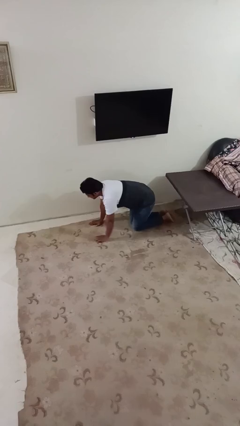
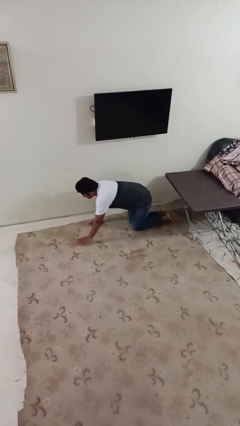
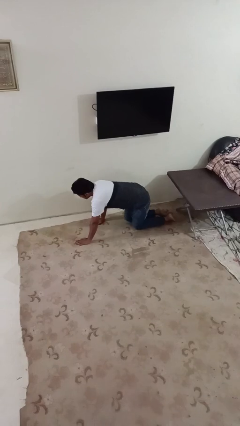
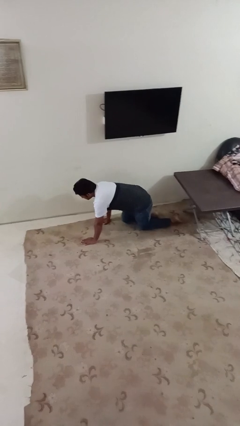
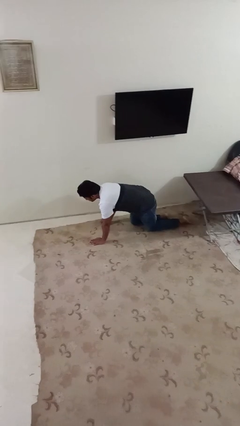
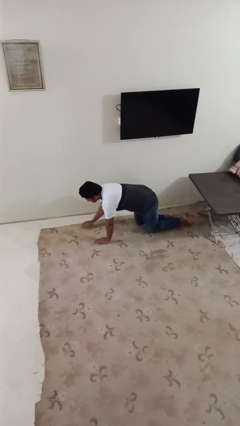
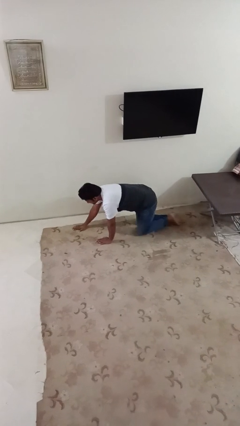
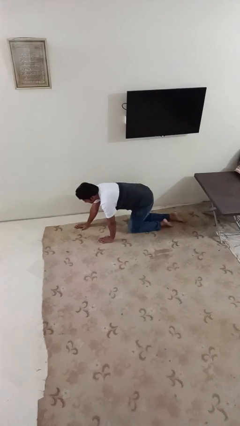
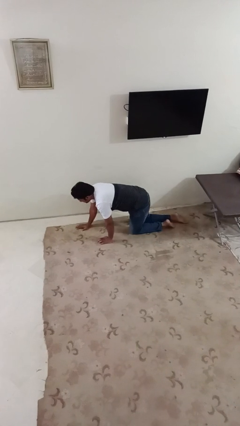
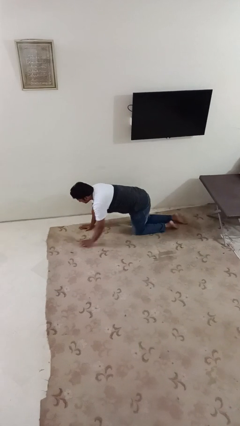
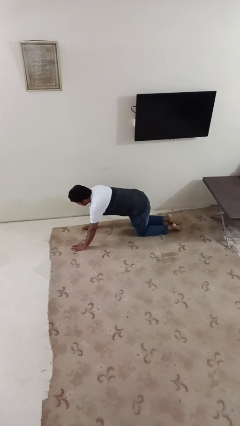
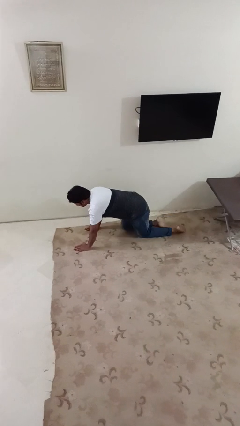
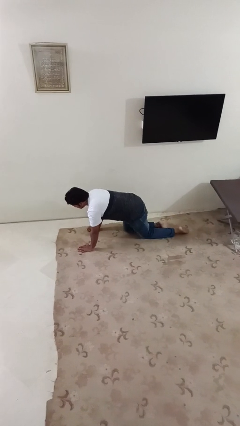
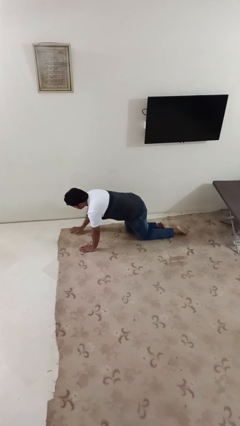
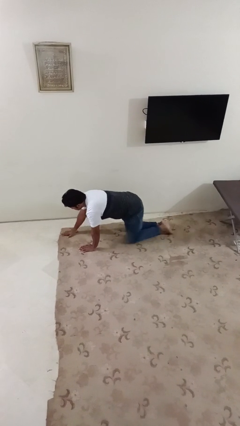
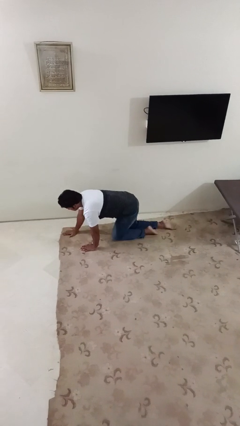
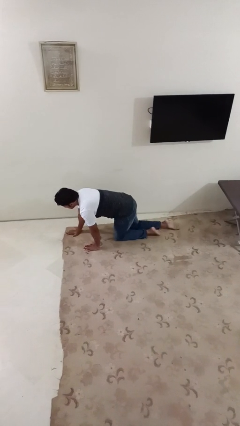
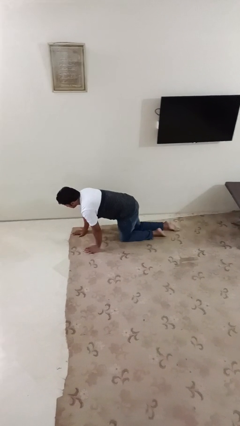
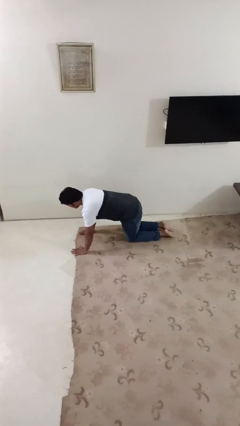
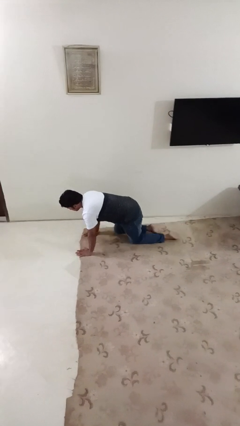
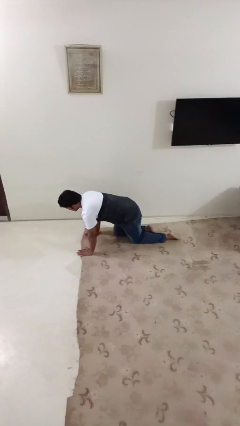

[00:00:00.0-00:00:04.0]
person crawls

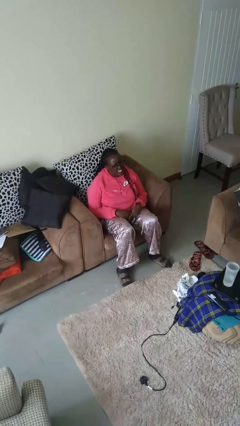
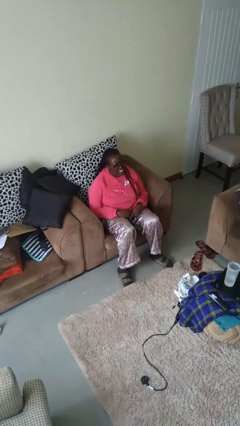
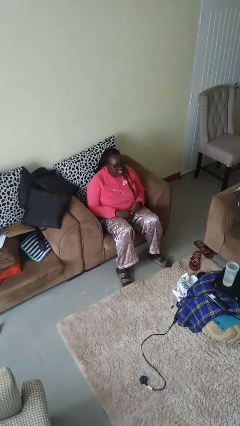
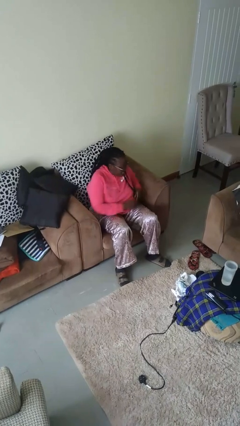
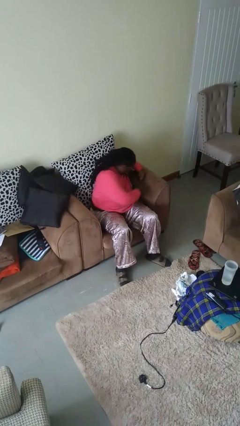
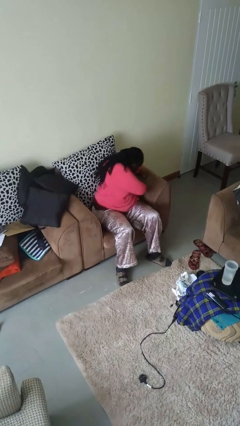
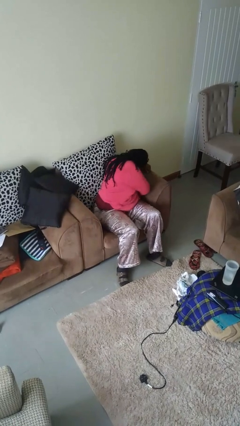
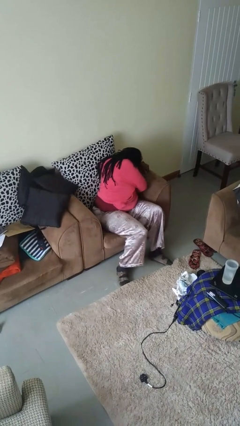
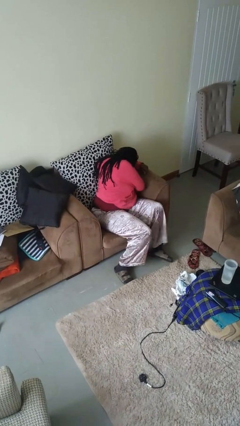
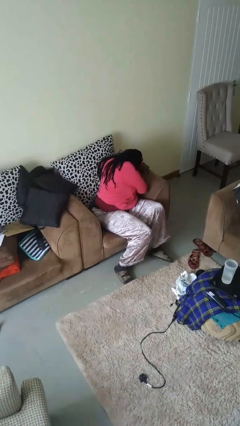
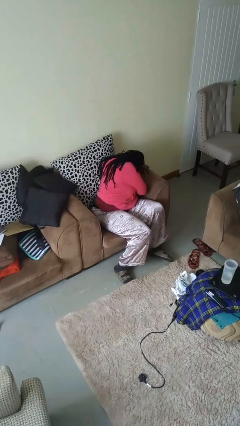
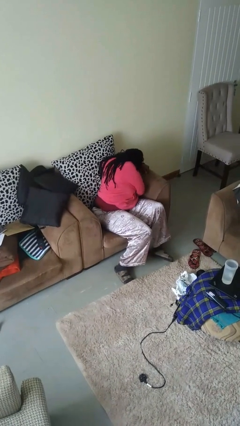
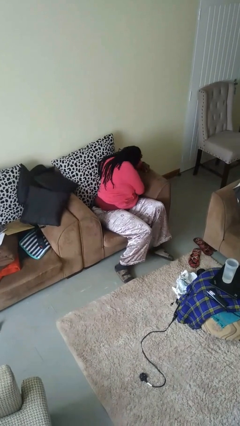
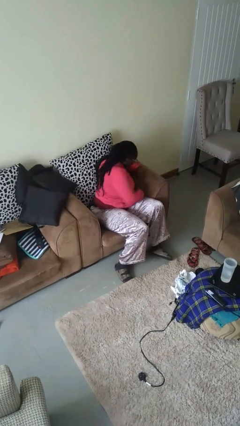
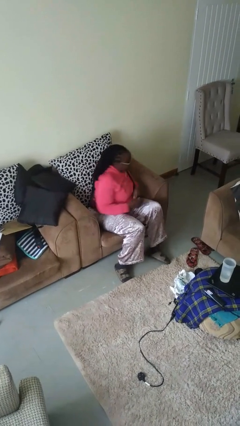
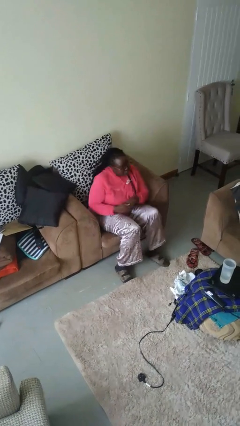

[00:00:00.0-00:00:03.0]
person searches in couch

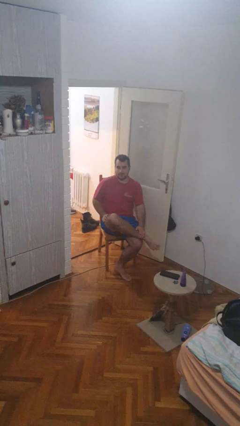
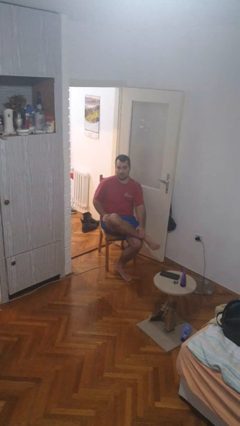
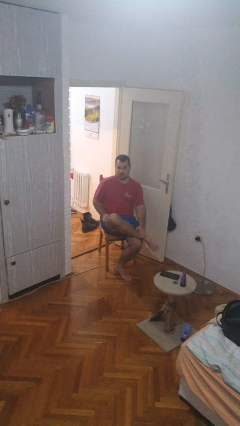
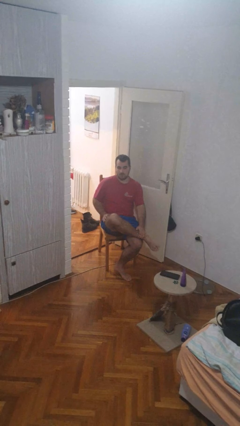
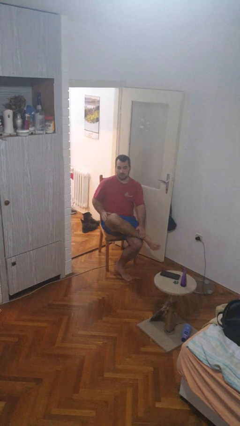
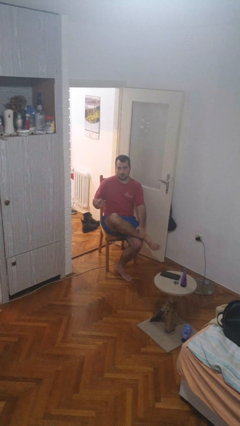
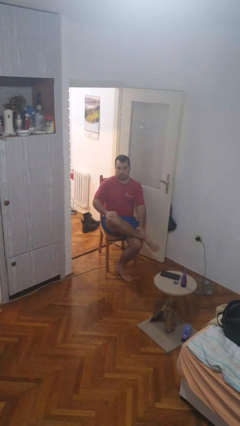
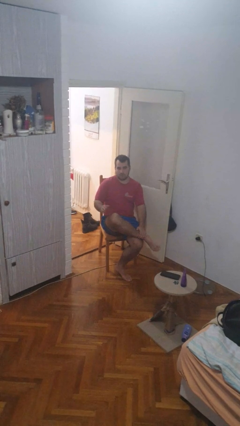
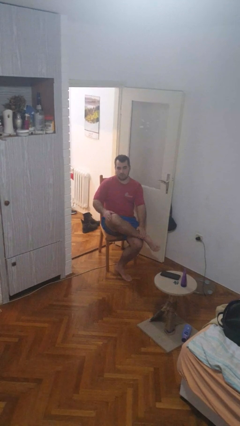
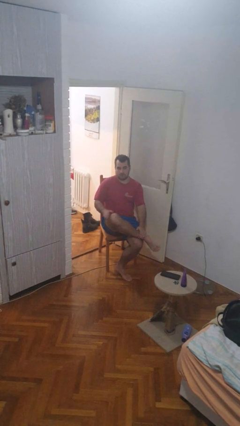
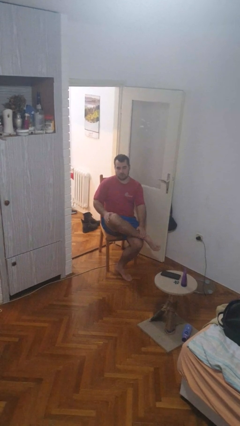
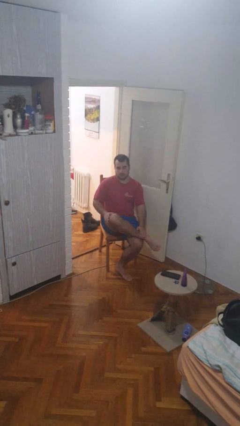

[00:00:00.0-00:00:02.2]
person slaps hands on thighs

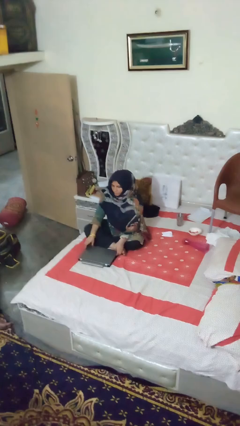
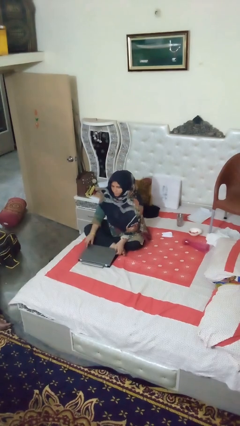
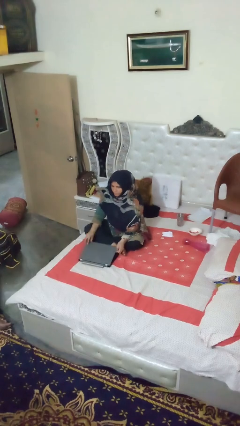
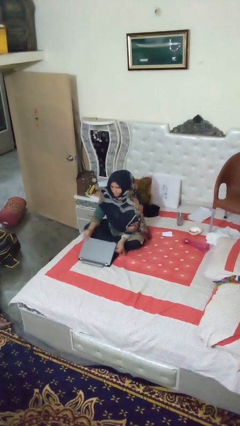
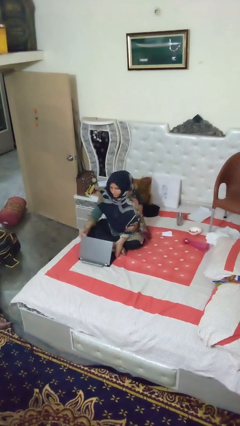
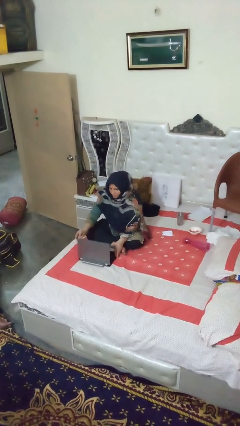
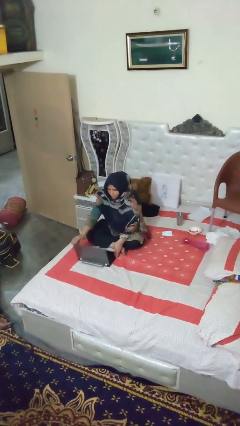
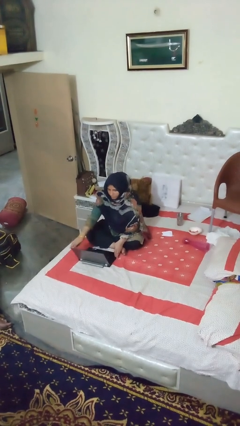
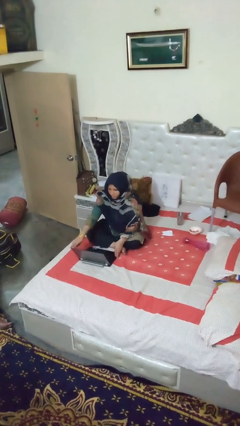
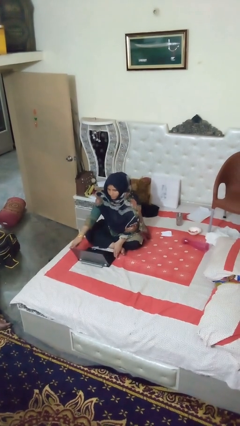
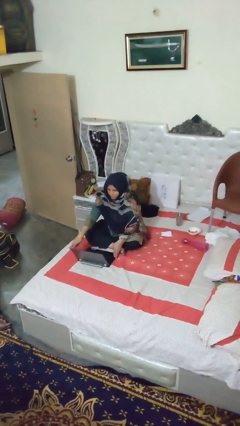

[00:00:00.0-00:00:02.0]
person opens laptop

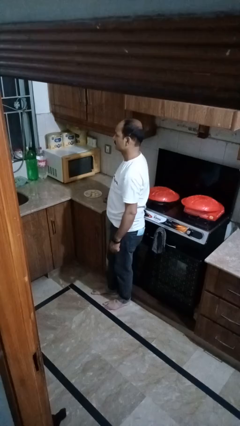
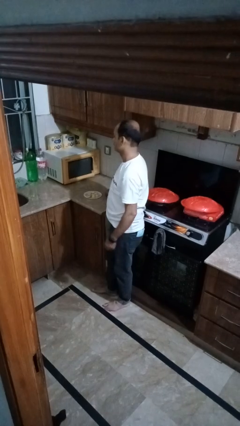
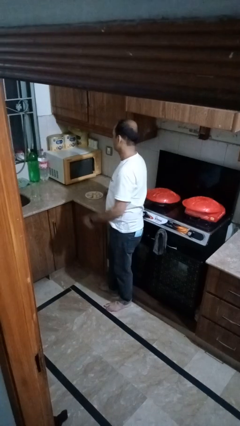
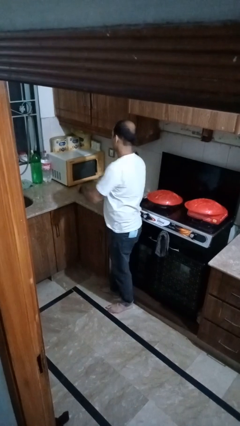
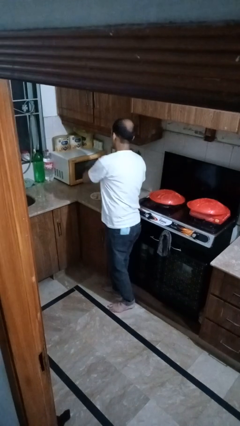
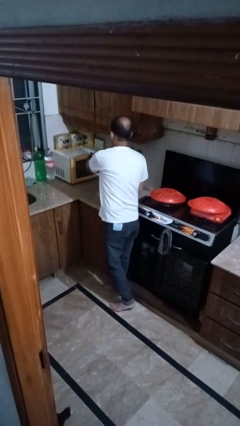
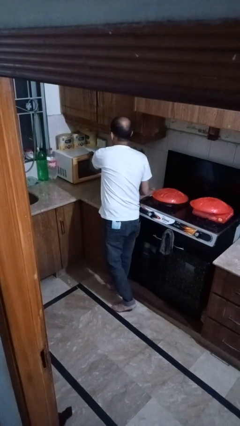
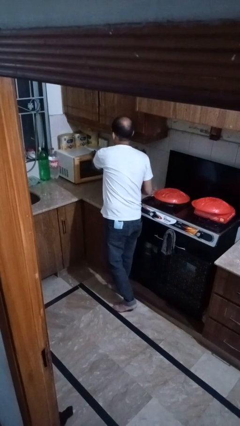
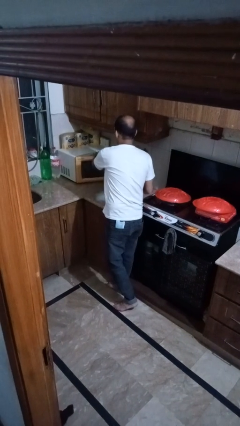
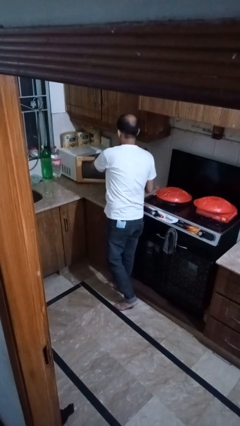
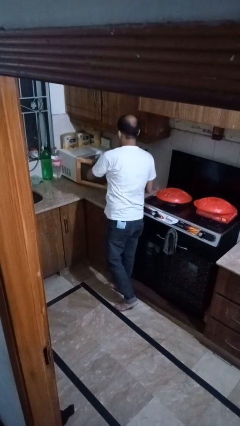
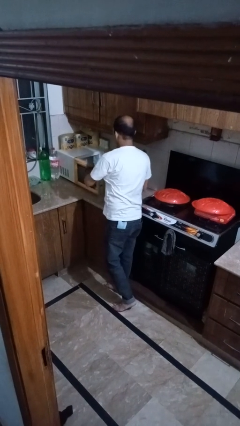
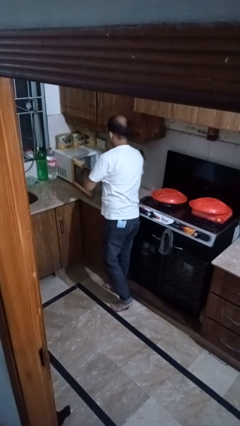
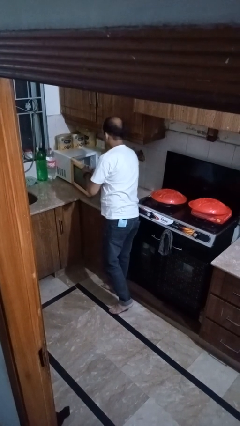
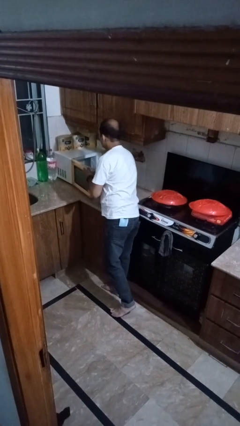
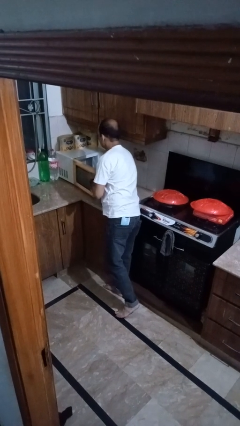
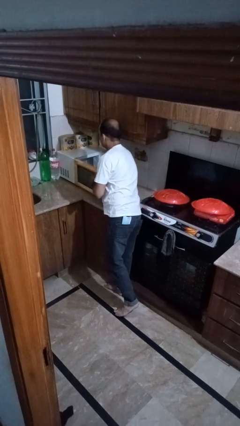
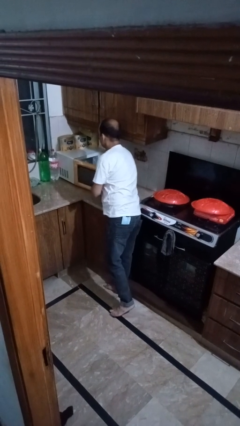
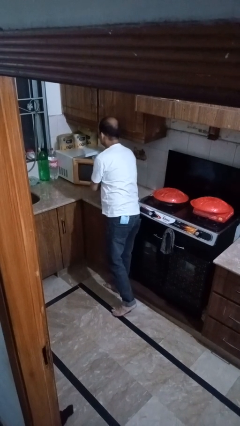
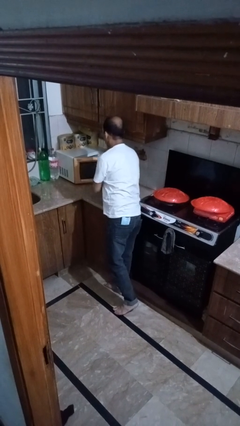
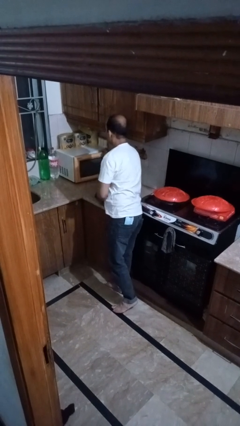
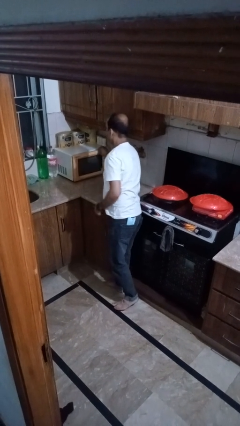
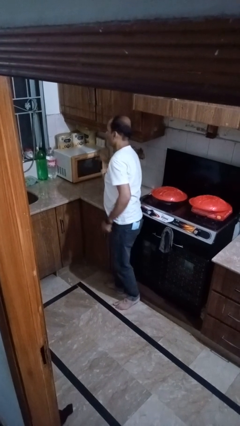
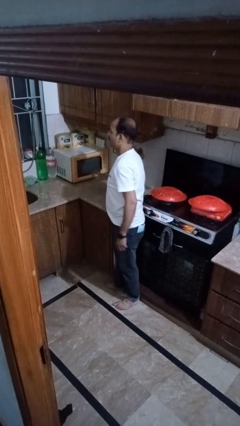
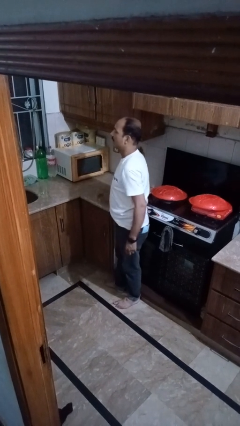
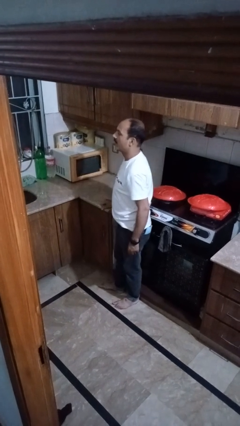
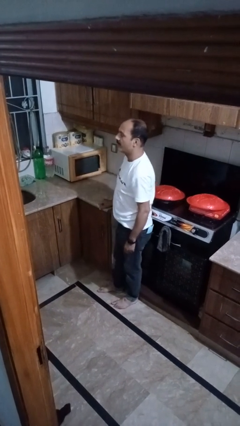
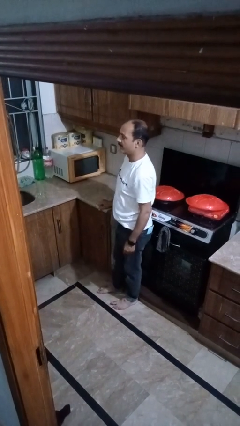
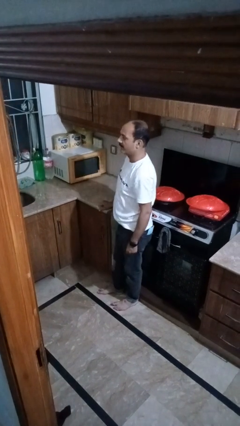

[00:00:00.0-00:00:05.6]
person puts object into microwave

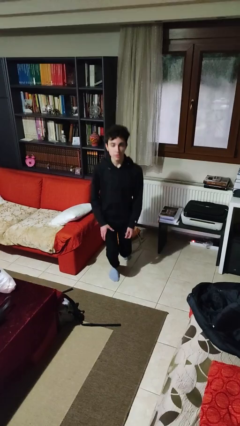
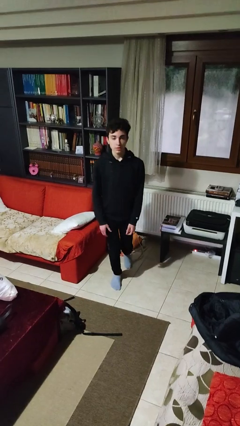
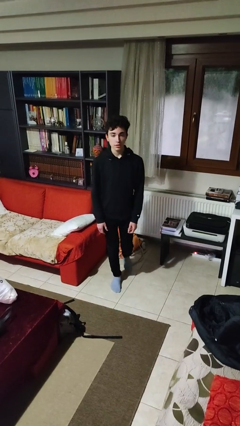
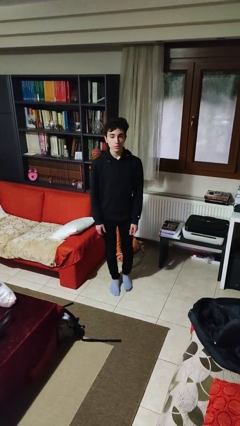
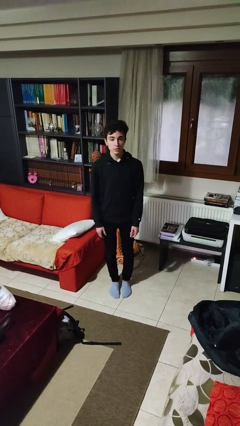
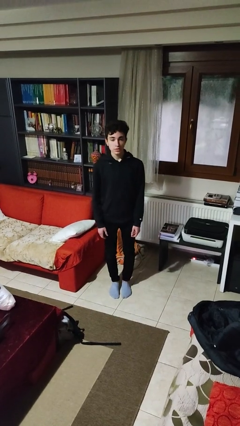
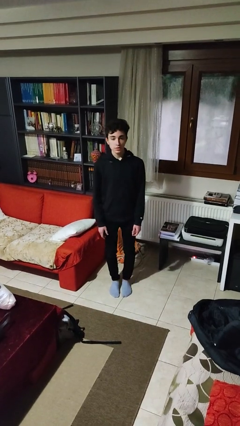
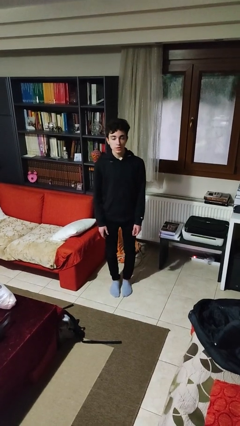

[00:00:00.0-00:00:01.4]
person stands up from floor
